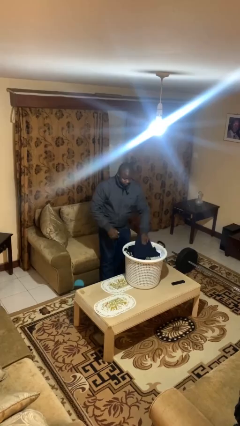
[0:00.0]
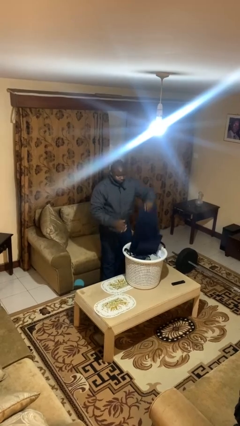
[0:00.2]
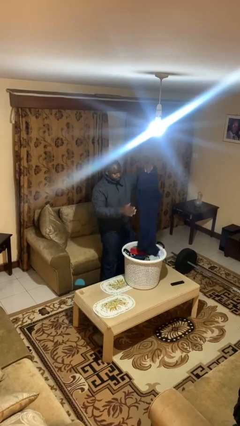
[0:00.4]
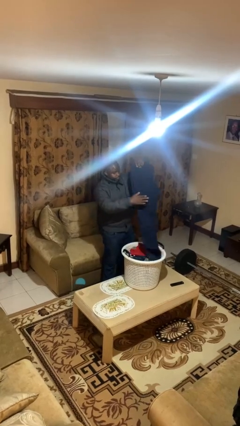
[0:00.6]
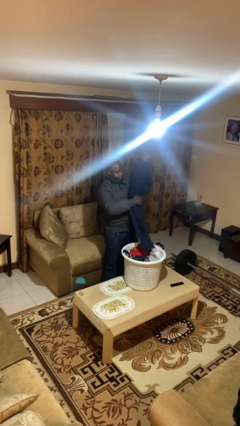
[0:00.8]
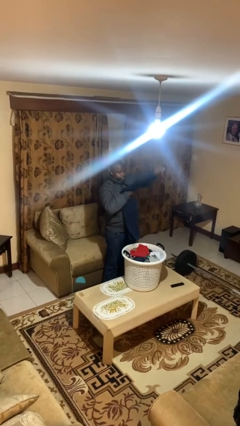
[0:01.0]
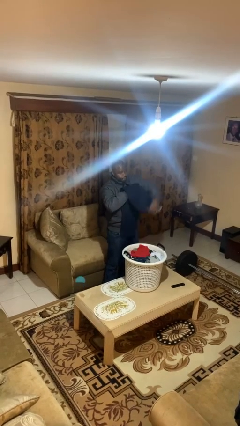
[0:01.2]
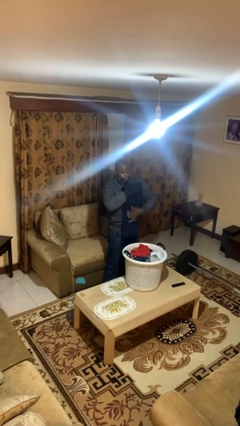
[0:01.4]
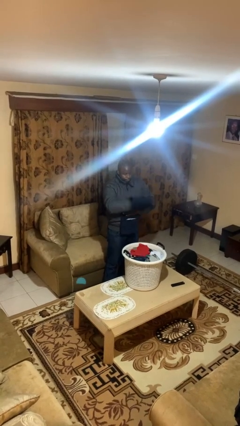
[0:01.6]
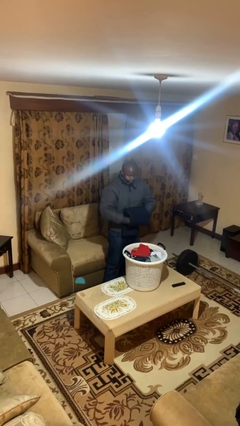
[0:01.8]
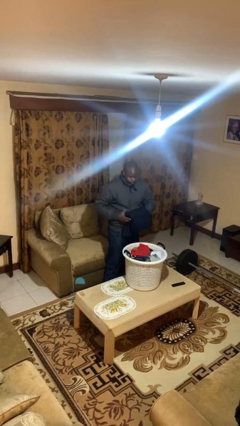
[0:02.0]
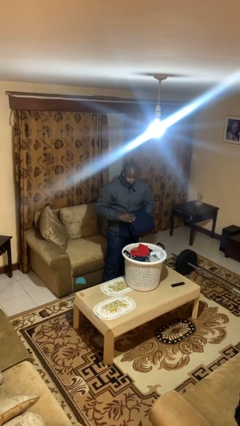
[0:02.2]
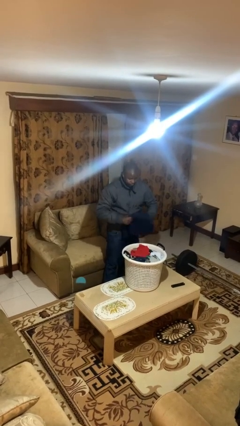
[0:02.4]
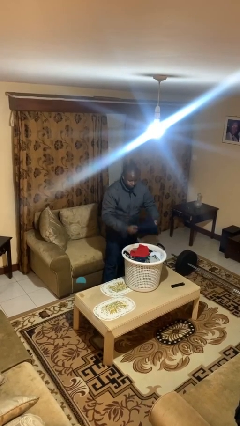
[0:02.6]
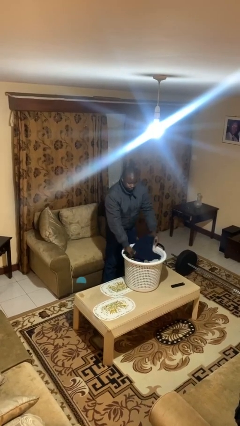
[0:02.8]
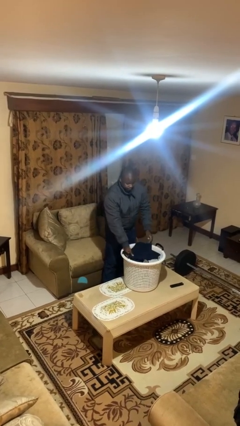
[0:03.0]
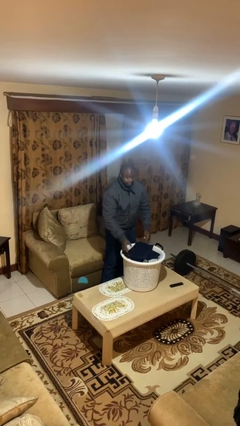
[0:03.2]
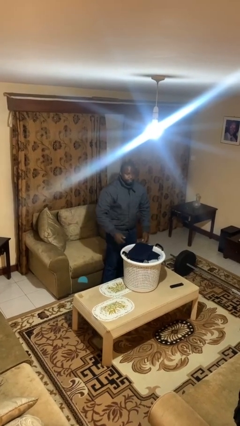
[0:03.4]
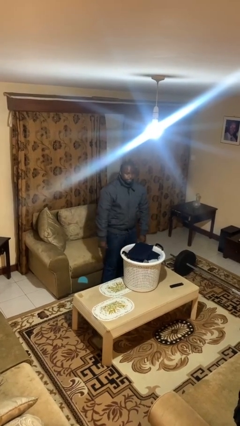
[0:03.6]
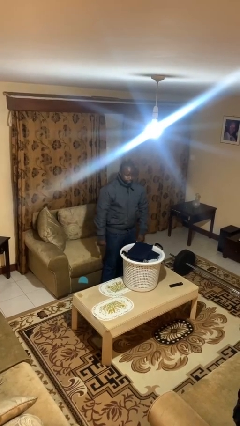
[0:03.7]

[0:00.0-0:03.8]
person folds pants

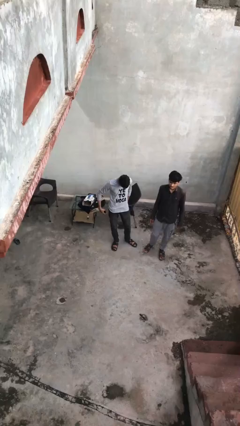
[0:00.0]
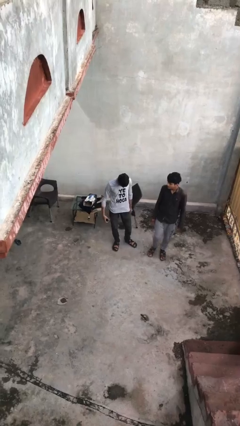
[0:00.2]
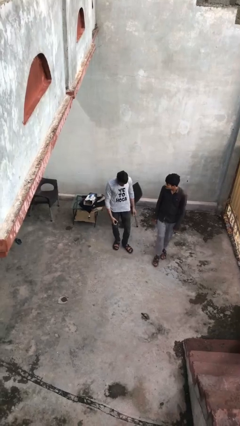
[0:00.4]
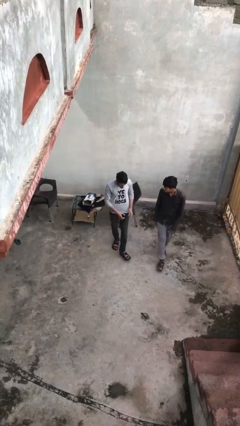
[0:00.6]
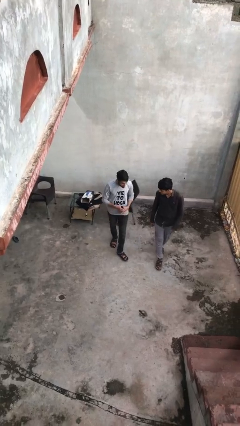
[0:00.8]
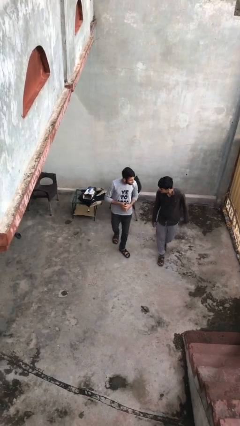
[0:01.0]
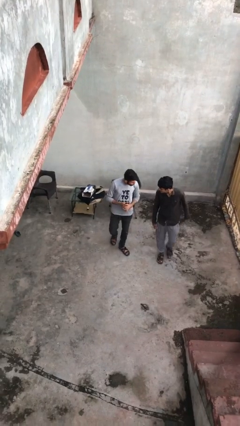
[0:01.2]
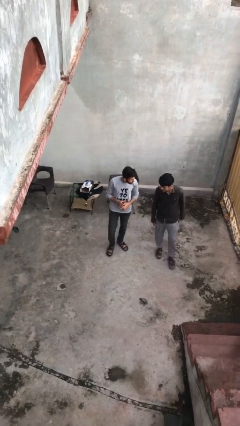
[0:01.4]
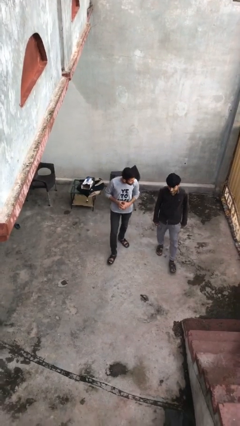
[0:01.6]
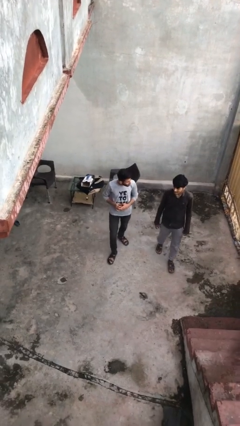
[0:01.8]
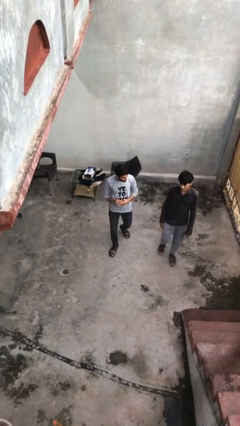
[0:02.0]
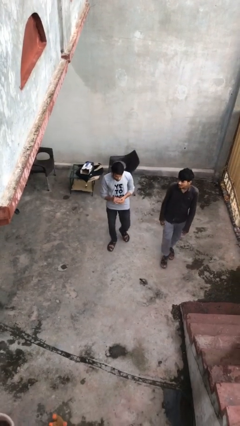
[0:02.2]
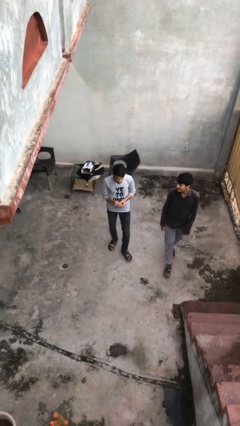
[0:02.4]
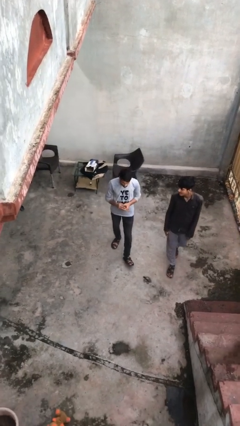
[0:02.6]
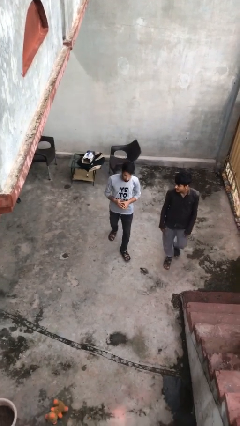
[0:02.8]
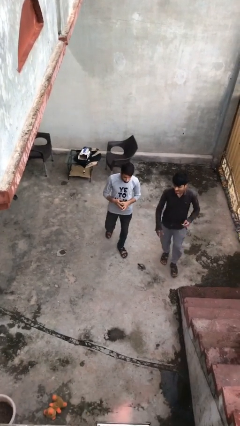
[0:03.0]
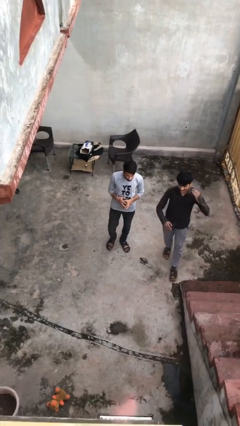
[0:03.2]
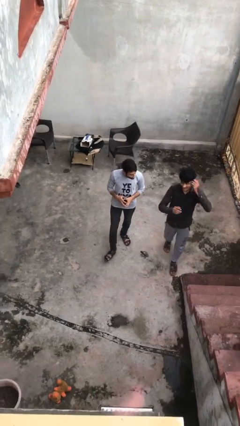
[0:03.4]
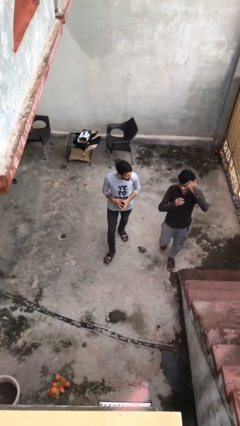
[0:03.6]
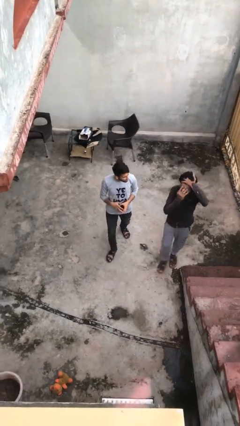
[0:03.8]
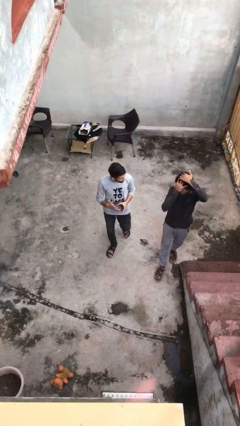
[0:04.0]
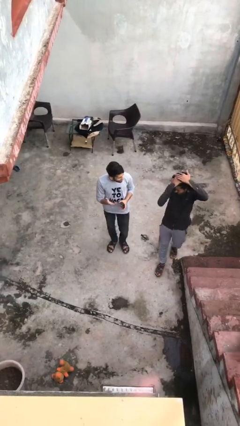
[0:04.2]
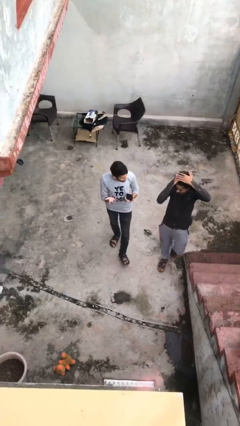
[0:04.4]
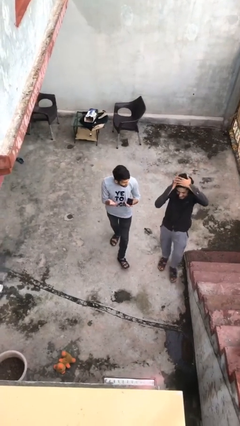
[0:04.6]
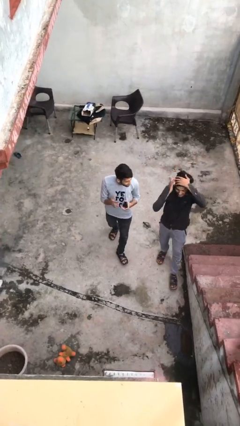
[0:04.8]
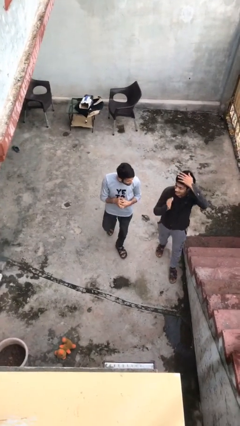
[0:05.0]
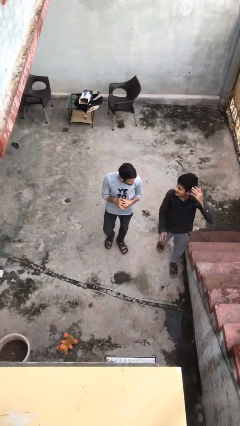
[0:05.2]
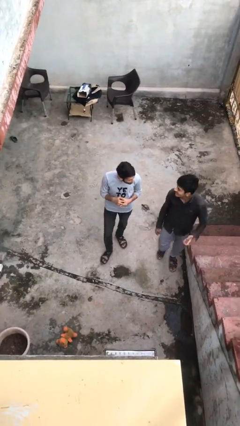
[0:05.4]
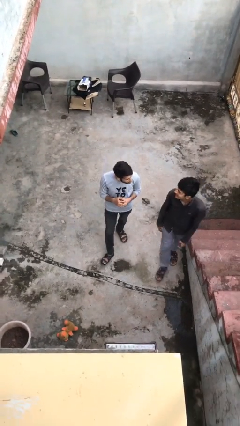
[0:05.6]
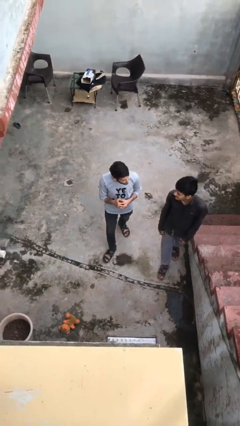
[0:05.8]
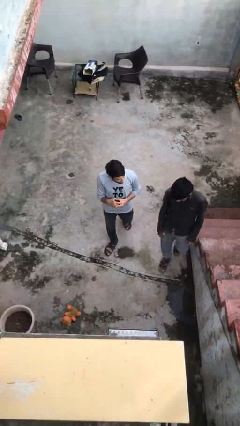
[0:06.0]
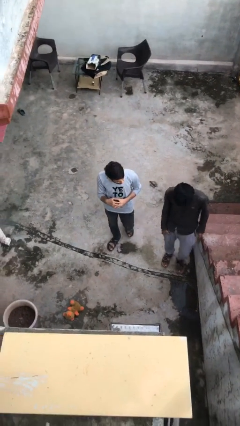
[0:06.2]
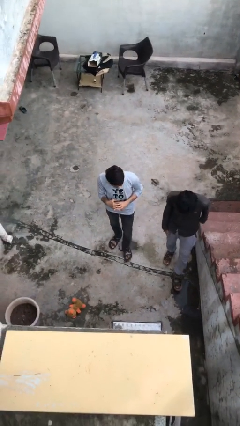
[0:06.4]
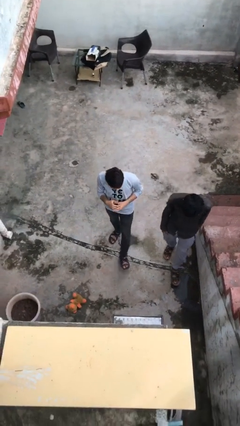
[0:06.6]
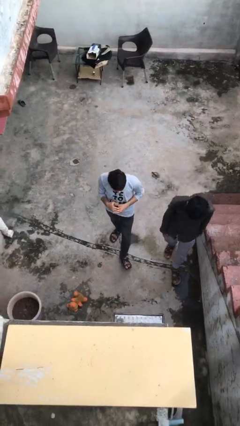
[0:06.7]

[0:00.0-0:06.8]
person talks to person

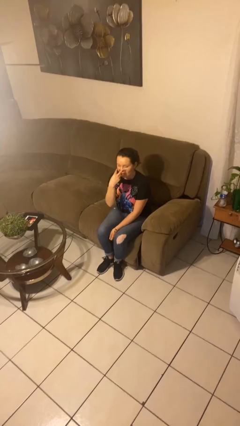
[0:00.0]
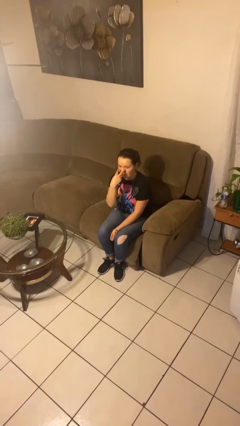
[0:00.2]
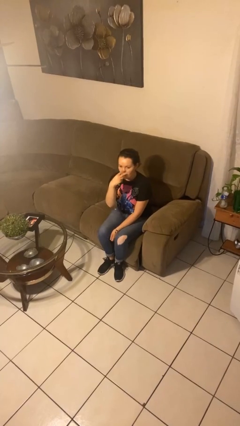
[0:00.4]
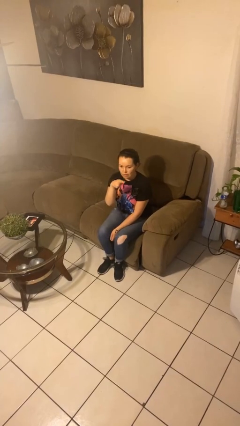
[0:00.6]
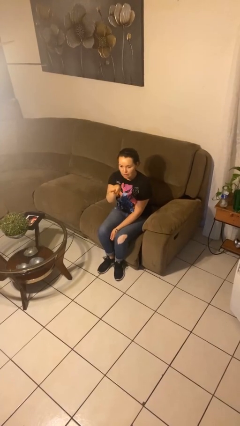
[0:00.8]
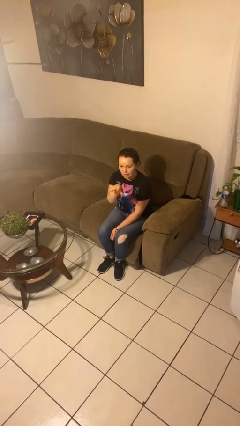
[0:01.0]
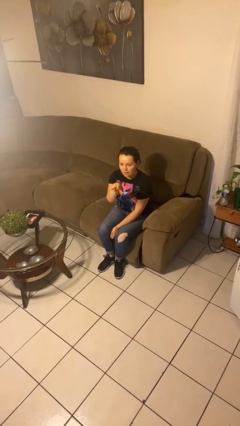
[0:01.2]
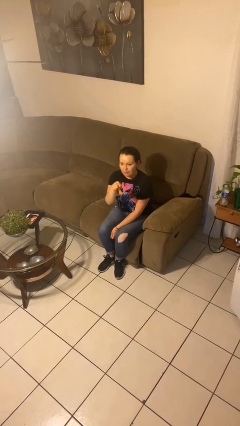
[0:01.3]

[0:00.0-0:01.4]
person gestures watch closely

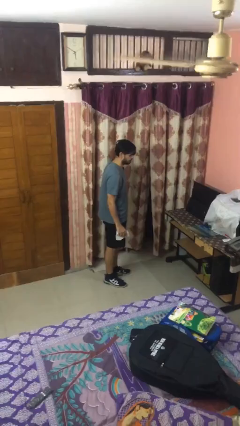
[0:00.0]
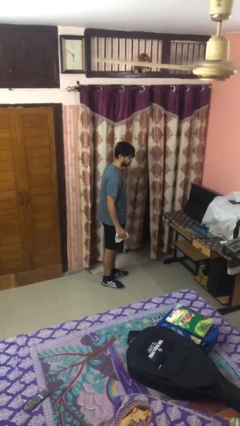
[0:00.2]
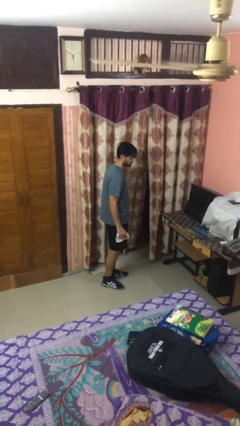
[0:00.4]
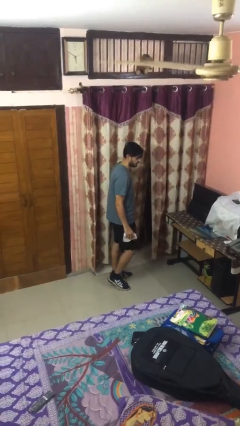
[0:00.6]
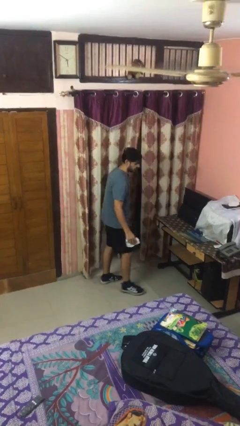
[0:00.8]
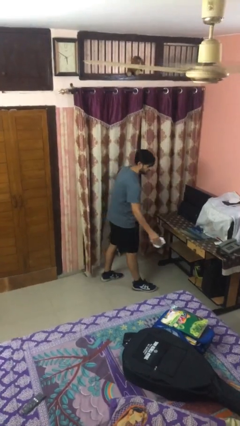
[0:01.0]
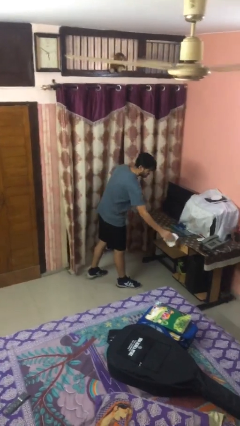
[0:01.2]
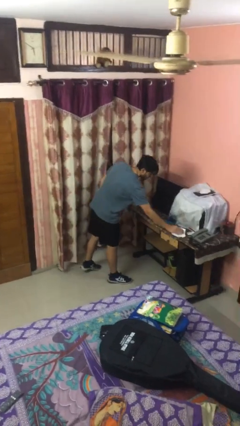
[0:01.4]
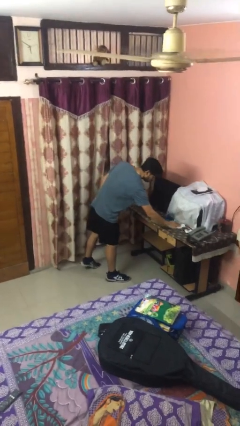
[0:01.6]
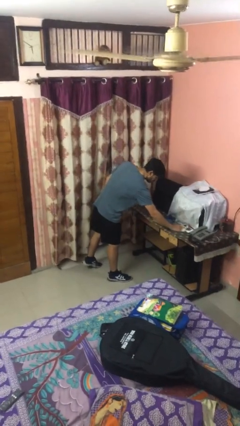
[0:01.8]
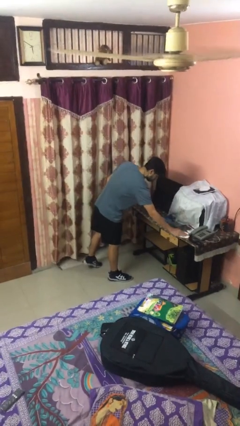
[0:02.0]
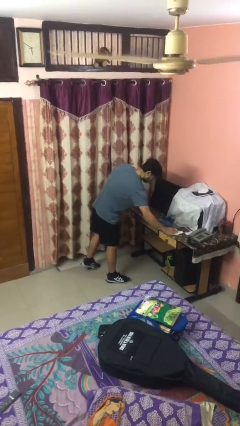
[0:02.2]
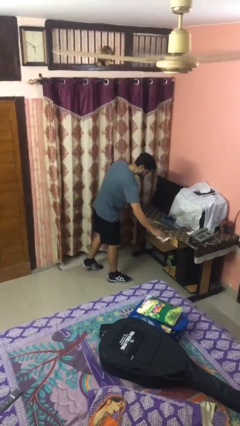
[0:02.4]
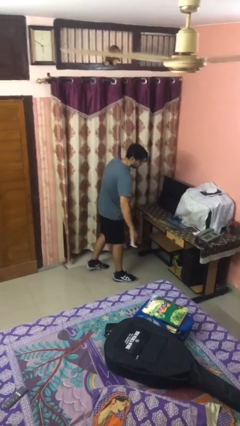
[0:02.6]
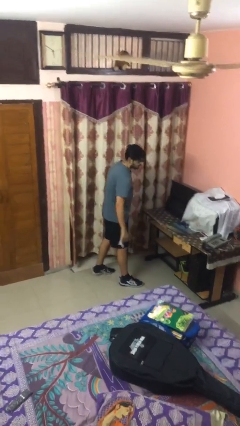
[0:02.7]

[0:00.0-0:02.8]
person cleans table with rag

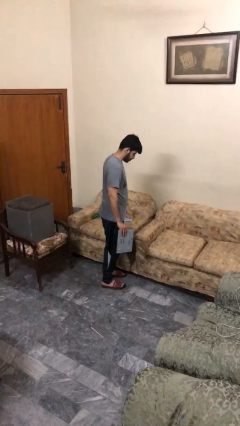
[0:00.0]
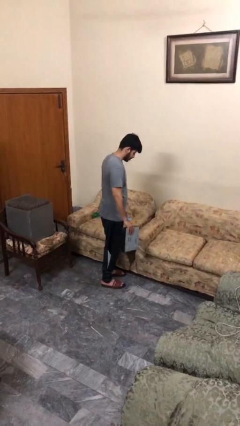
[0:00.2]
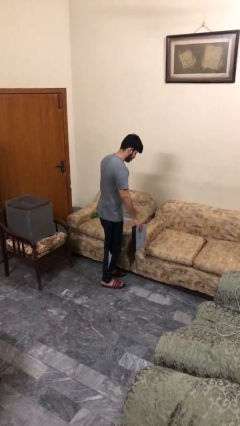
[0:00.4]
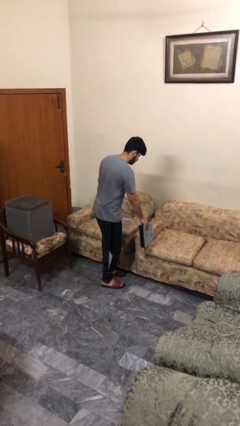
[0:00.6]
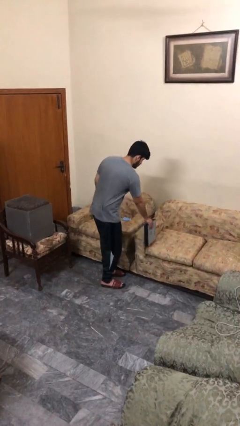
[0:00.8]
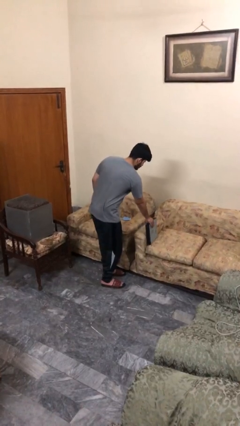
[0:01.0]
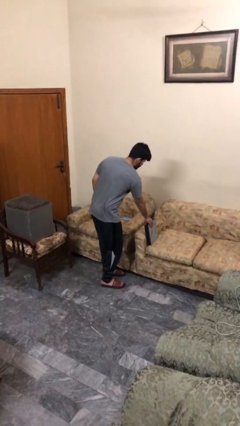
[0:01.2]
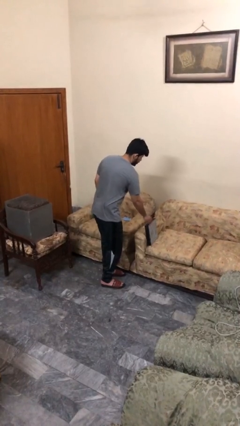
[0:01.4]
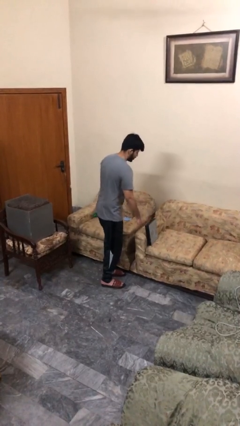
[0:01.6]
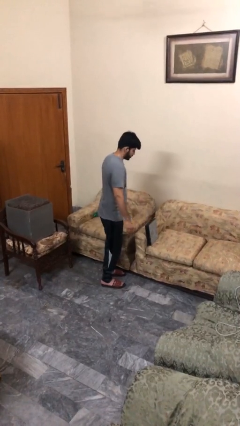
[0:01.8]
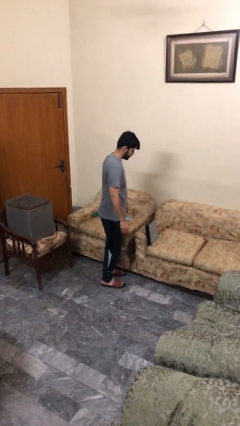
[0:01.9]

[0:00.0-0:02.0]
person puts down object on couch

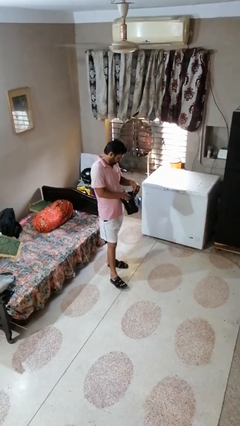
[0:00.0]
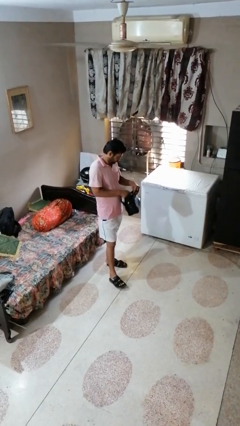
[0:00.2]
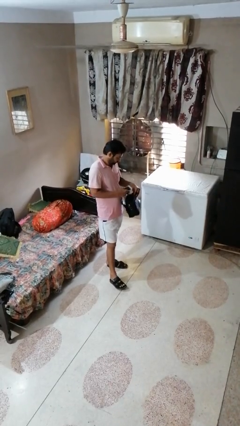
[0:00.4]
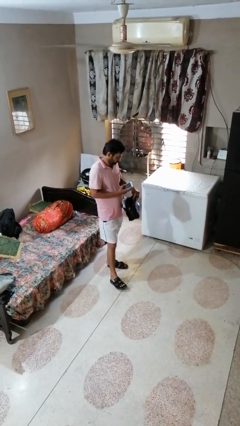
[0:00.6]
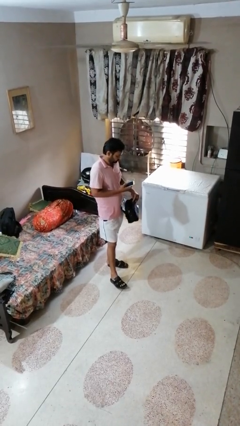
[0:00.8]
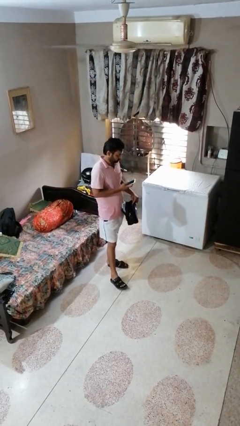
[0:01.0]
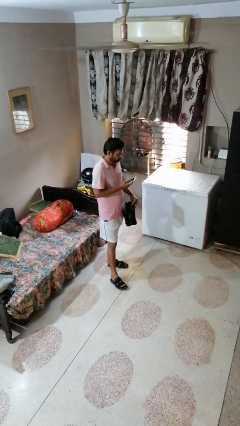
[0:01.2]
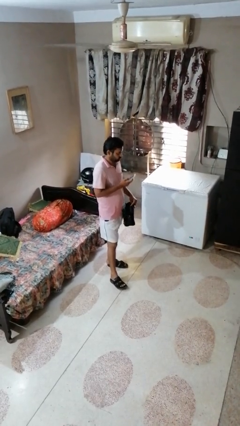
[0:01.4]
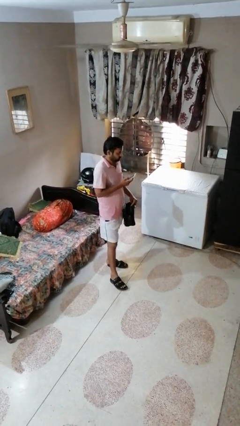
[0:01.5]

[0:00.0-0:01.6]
person takes object from purse
